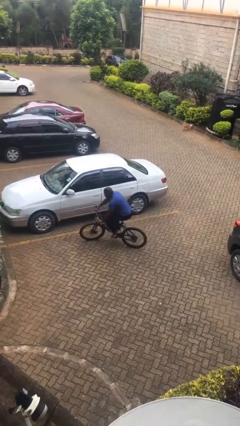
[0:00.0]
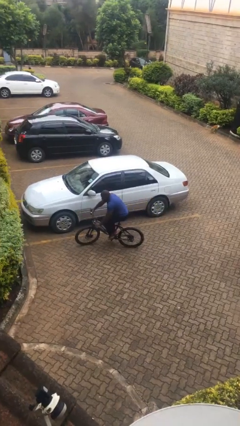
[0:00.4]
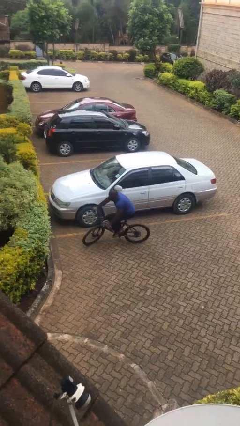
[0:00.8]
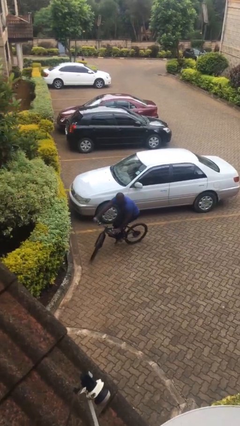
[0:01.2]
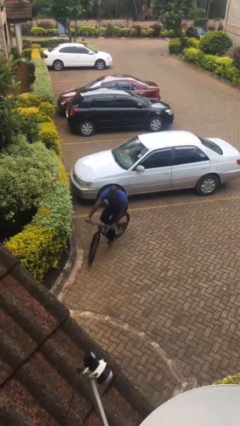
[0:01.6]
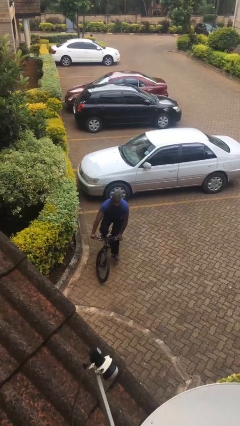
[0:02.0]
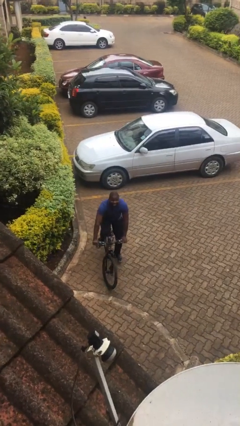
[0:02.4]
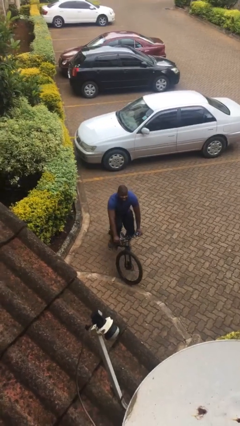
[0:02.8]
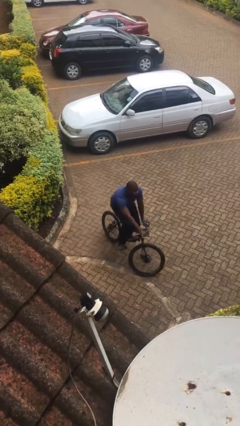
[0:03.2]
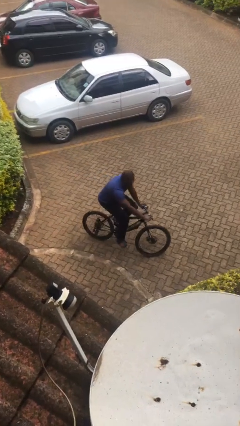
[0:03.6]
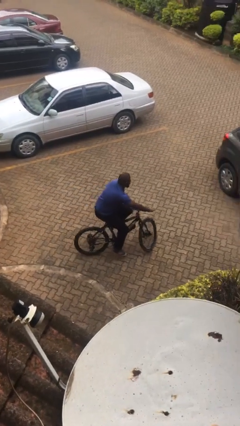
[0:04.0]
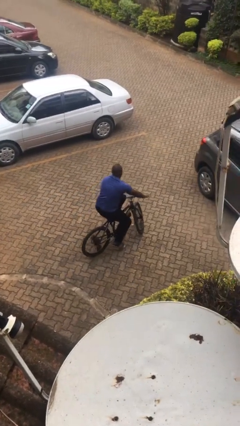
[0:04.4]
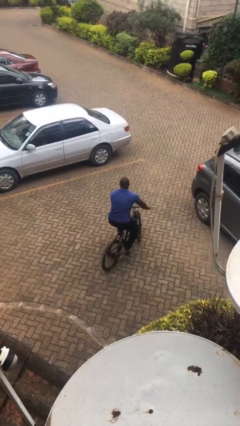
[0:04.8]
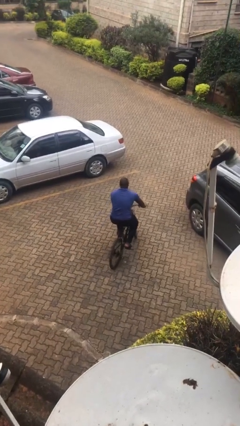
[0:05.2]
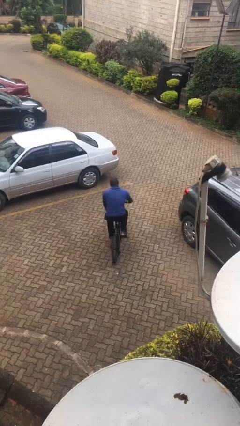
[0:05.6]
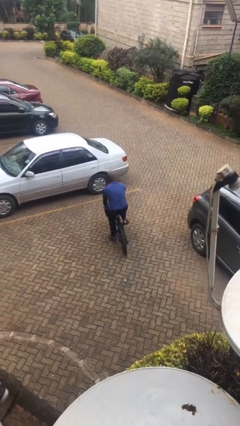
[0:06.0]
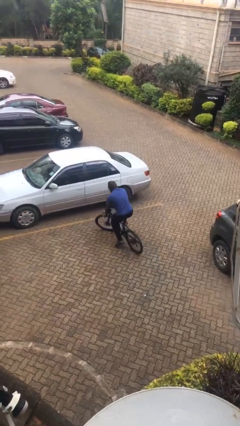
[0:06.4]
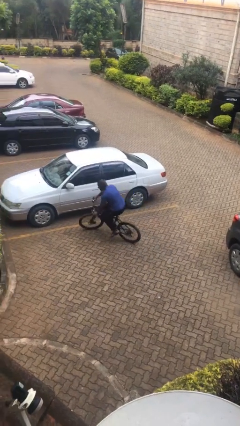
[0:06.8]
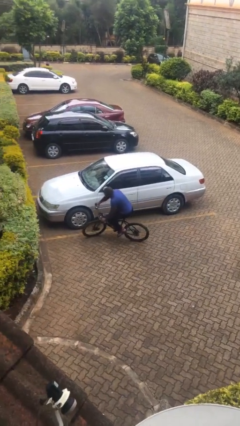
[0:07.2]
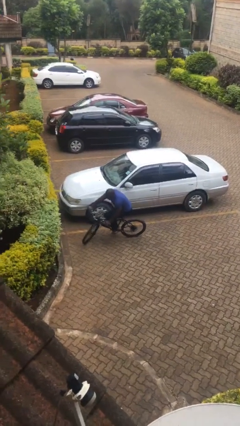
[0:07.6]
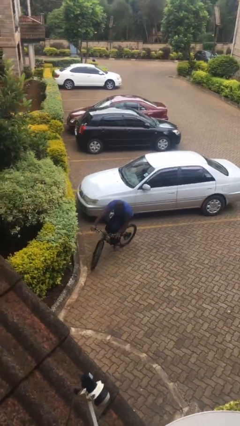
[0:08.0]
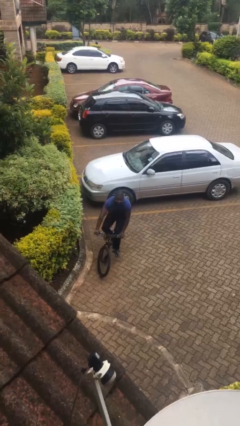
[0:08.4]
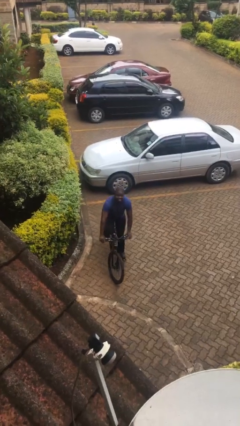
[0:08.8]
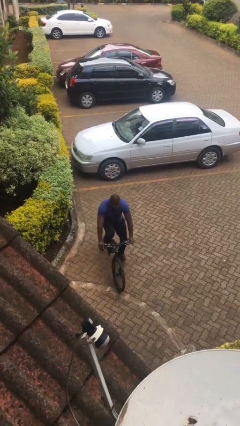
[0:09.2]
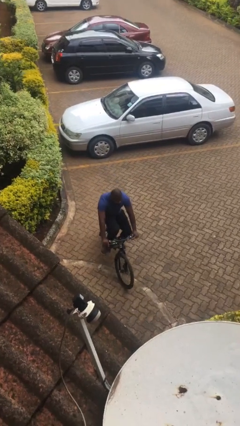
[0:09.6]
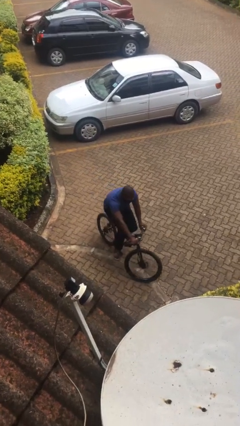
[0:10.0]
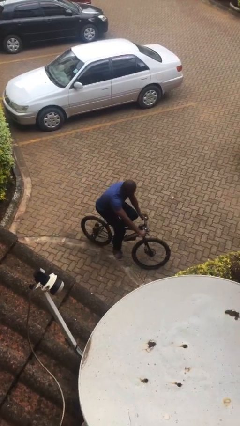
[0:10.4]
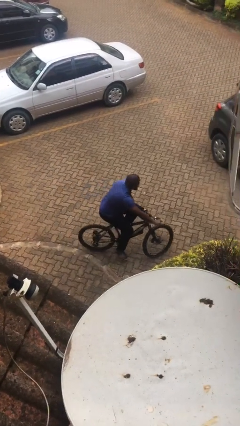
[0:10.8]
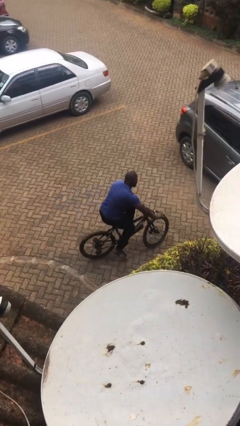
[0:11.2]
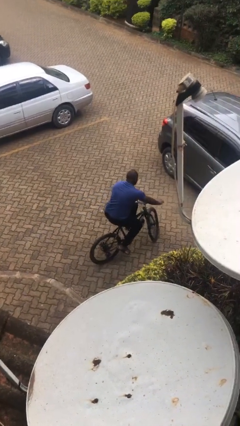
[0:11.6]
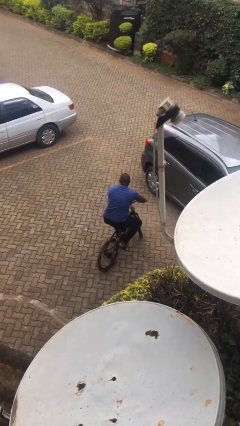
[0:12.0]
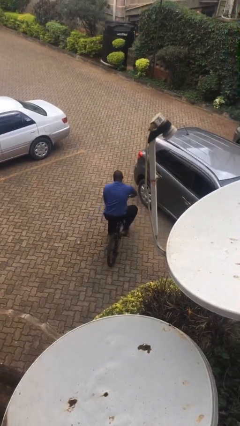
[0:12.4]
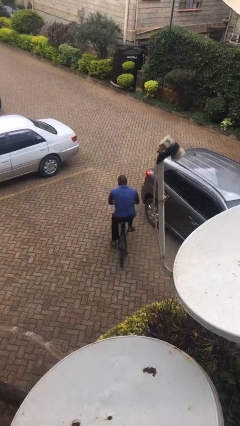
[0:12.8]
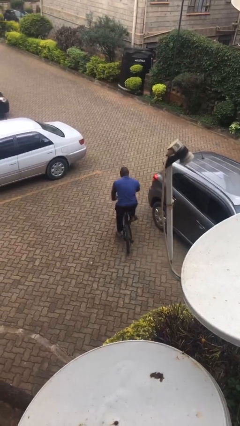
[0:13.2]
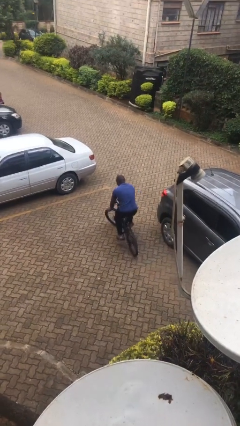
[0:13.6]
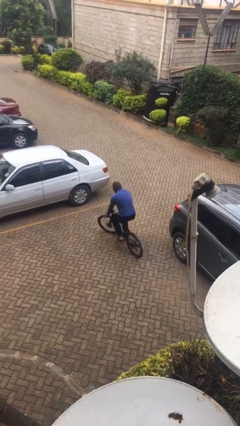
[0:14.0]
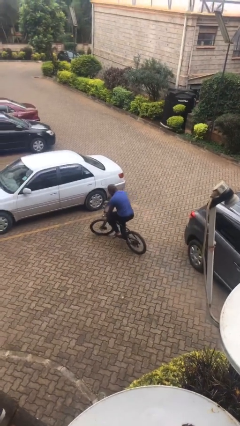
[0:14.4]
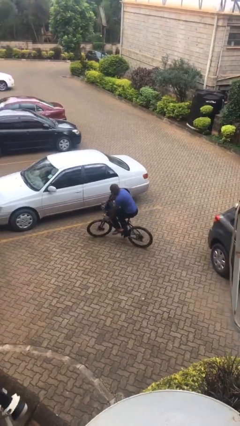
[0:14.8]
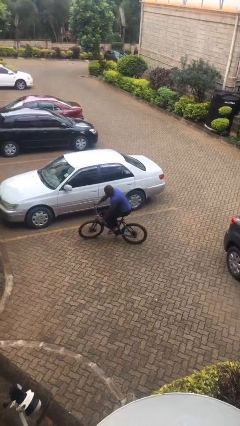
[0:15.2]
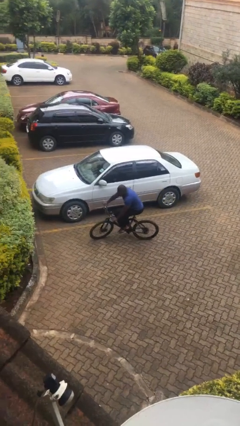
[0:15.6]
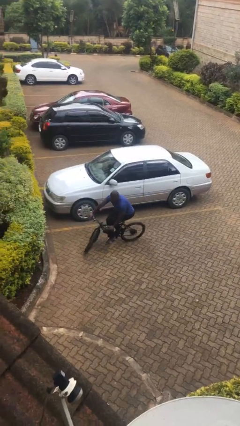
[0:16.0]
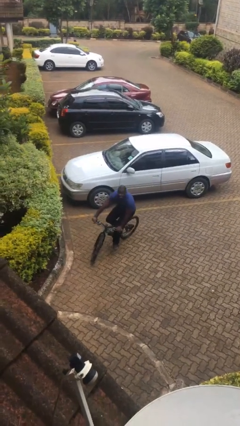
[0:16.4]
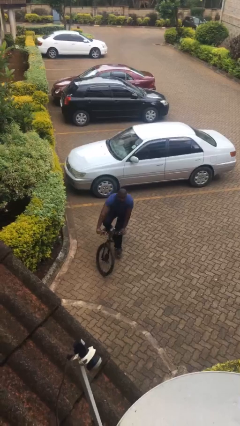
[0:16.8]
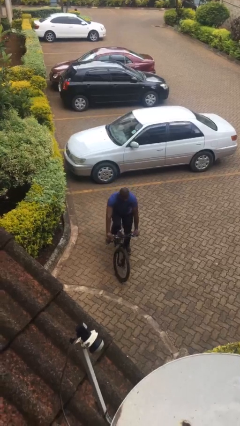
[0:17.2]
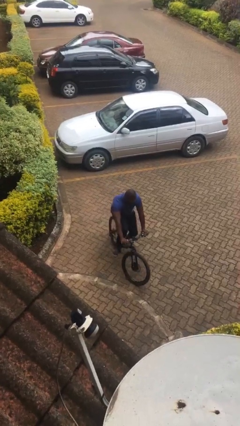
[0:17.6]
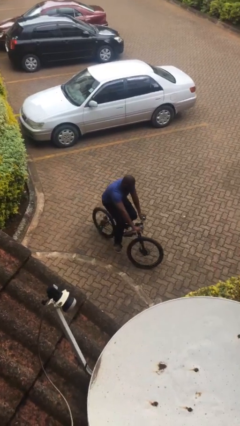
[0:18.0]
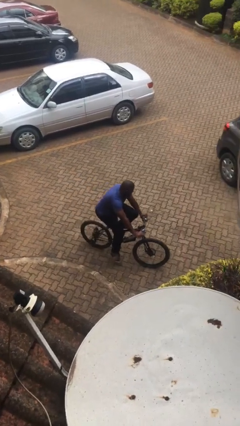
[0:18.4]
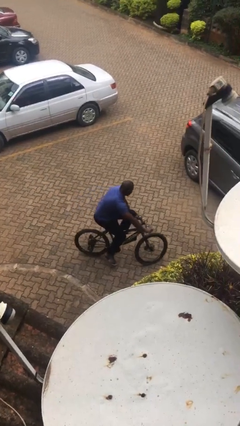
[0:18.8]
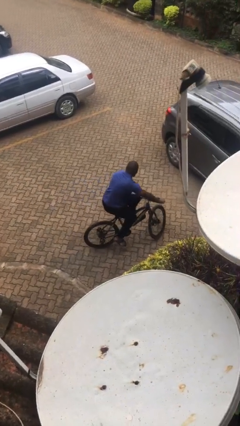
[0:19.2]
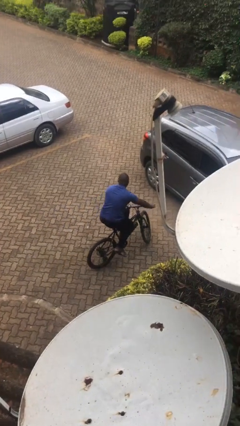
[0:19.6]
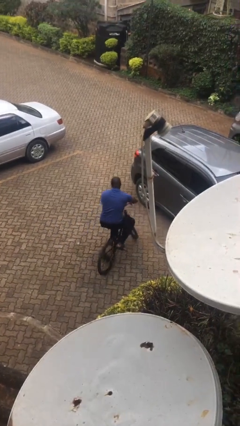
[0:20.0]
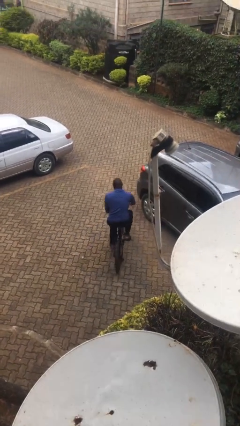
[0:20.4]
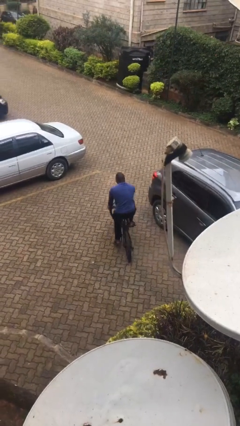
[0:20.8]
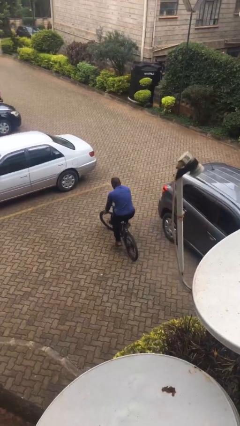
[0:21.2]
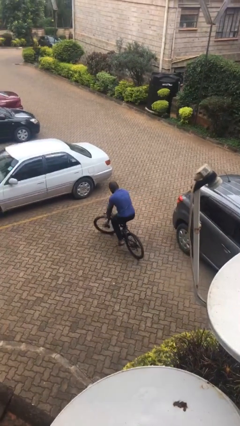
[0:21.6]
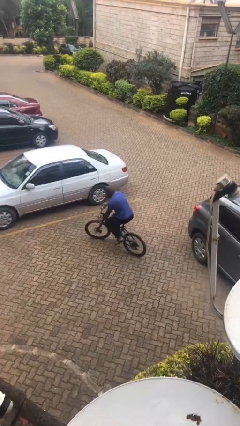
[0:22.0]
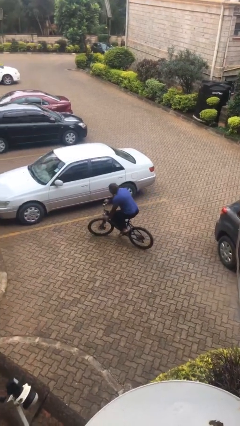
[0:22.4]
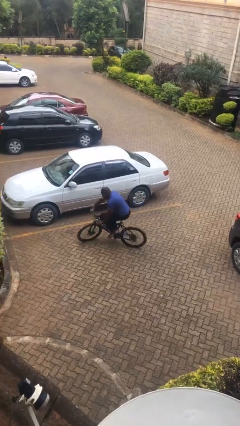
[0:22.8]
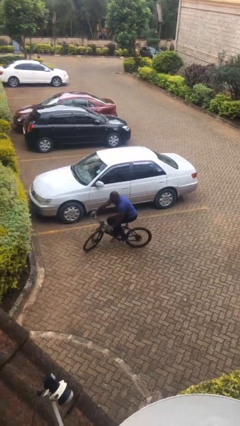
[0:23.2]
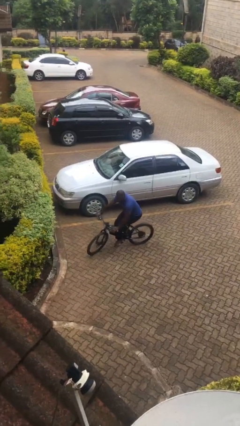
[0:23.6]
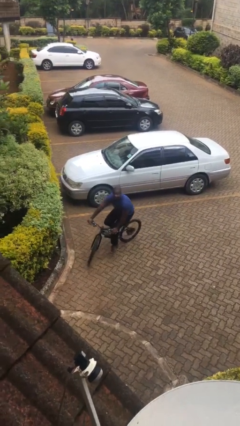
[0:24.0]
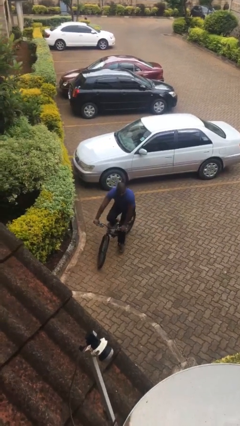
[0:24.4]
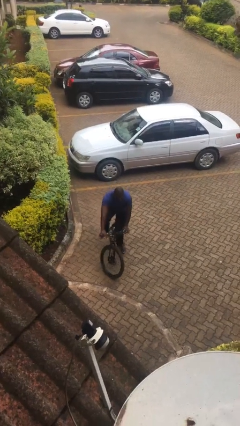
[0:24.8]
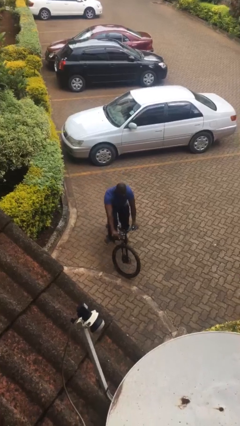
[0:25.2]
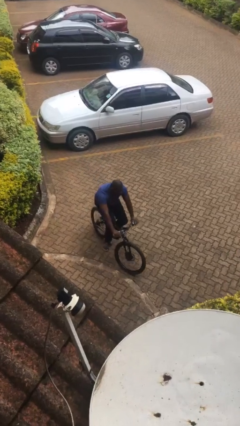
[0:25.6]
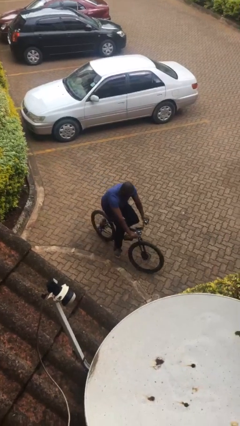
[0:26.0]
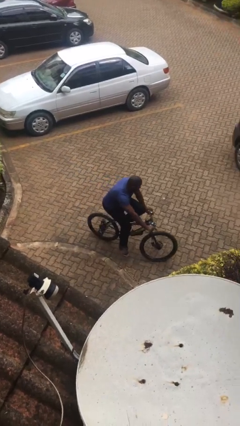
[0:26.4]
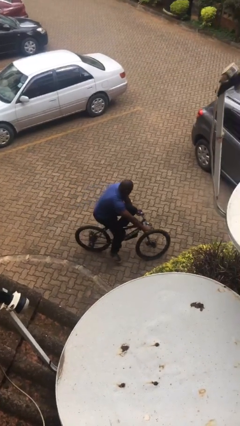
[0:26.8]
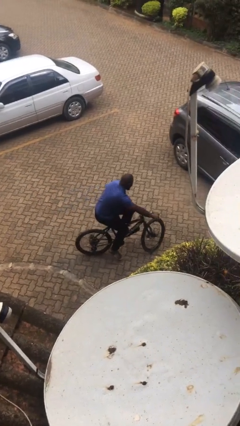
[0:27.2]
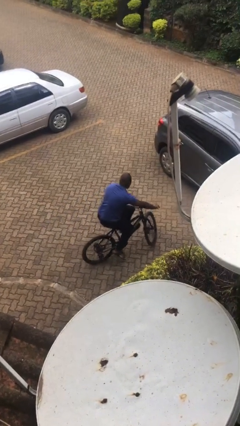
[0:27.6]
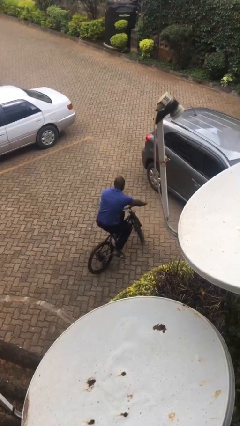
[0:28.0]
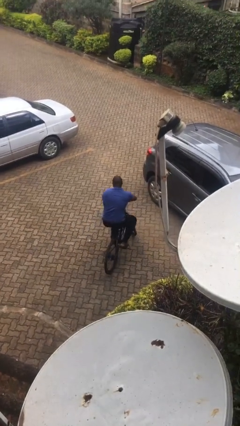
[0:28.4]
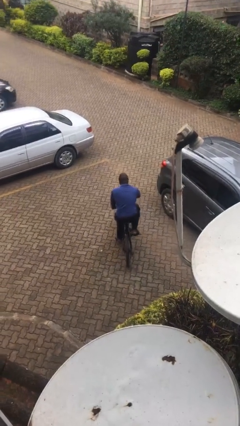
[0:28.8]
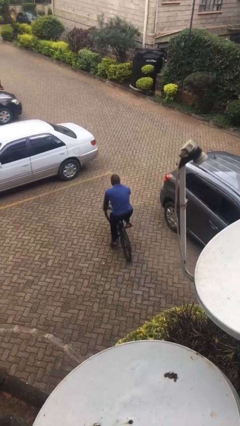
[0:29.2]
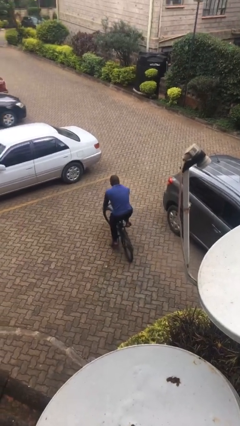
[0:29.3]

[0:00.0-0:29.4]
person rides bicycle

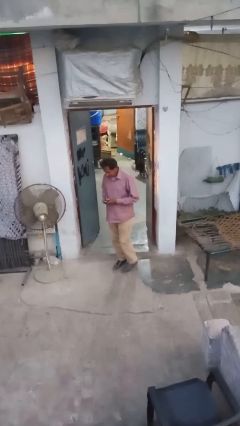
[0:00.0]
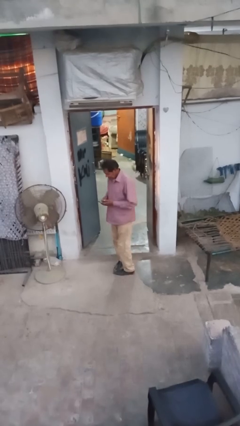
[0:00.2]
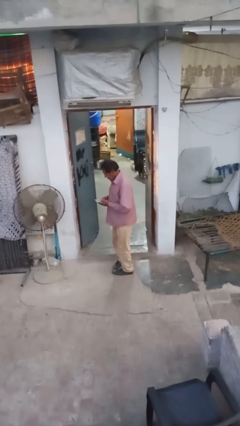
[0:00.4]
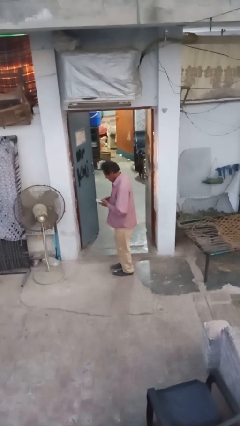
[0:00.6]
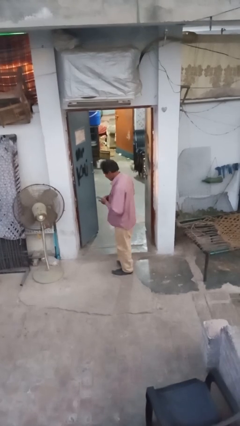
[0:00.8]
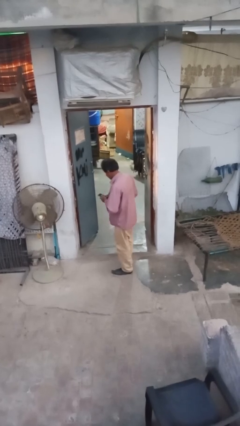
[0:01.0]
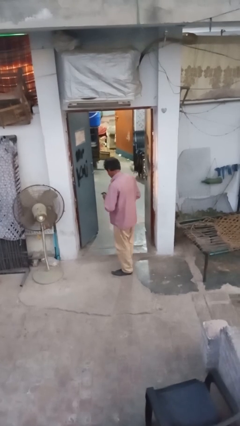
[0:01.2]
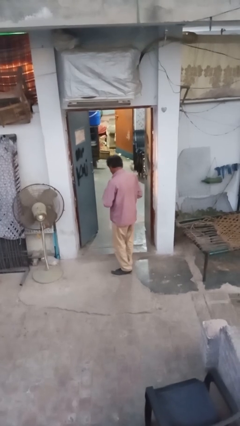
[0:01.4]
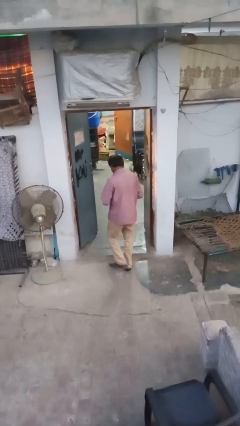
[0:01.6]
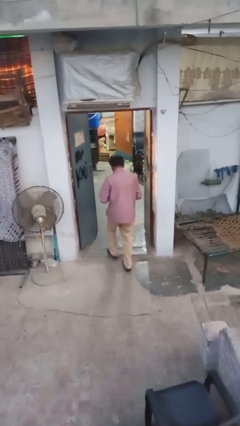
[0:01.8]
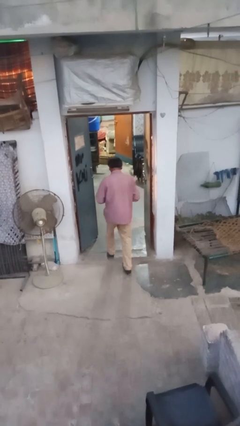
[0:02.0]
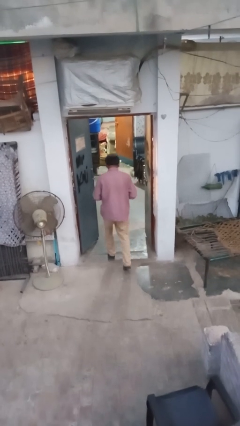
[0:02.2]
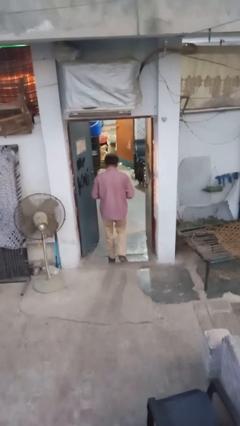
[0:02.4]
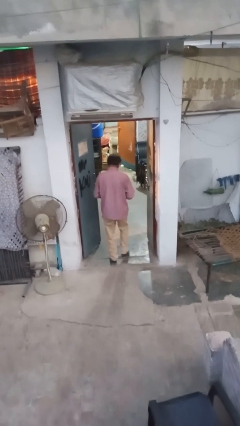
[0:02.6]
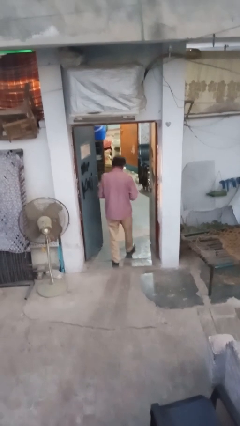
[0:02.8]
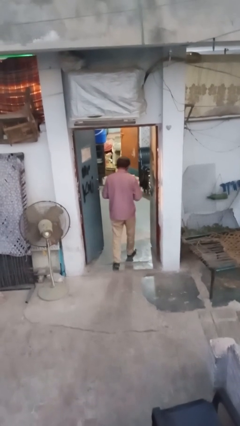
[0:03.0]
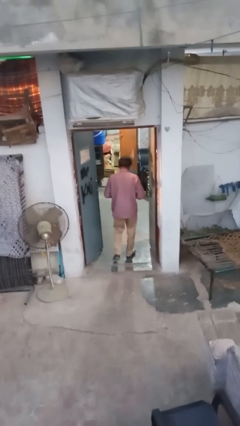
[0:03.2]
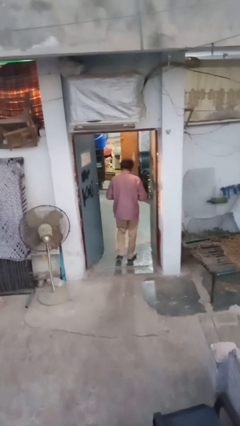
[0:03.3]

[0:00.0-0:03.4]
person exits scene through structure
